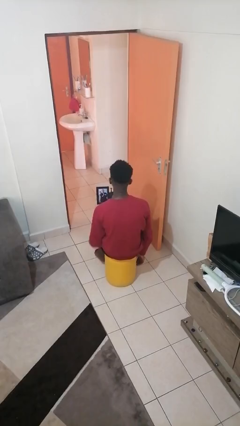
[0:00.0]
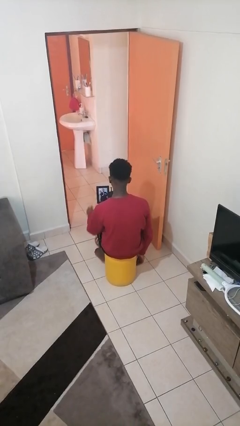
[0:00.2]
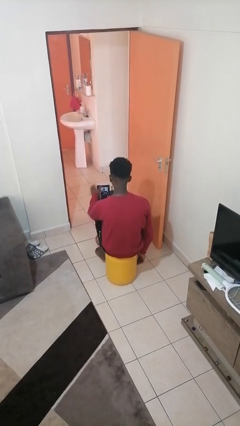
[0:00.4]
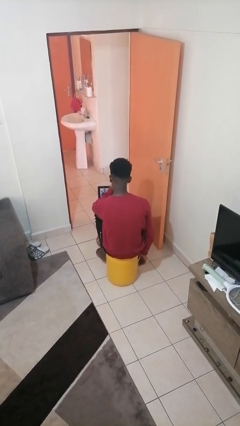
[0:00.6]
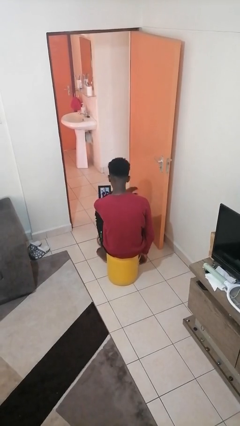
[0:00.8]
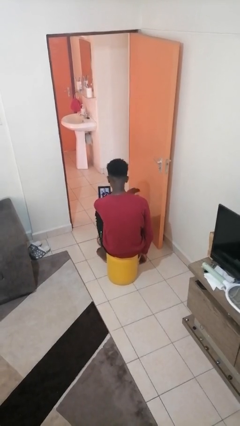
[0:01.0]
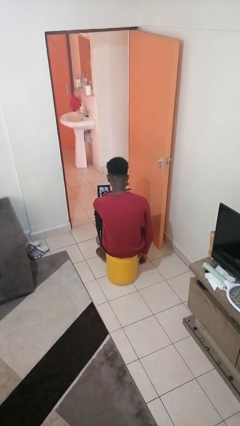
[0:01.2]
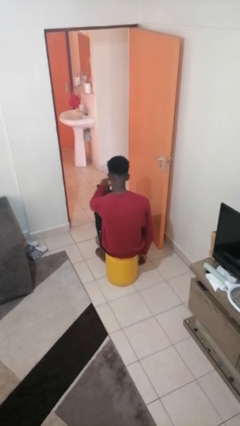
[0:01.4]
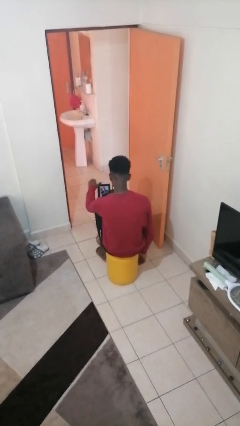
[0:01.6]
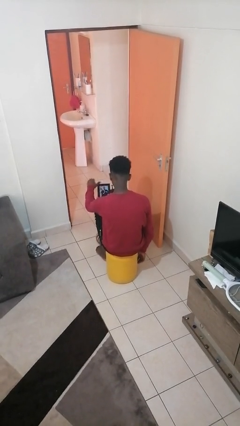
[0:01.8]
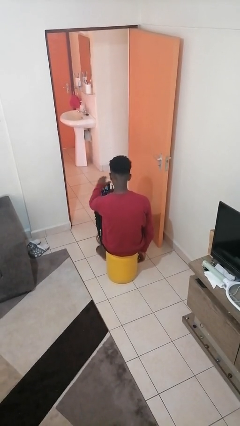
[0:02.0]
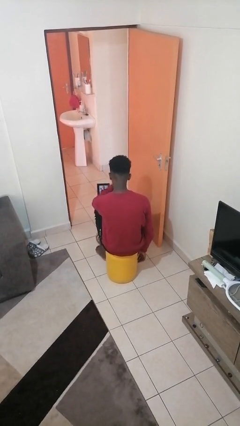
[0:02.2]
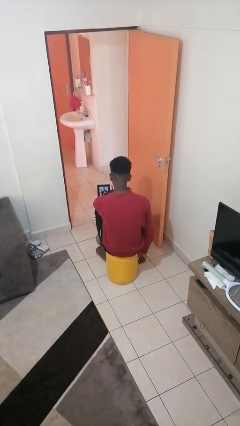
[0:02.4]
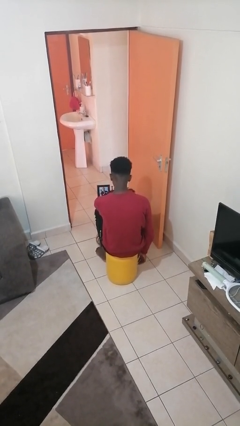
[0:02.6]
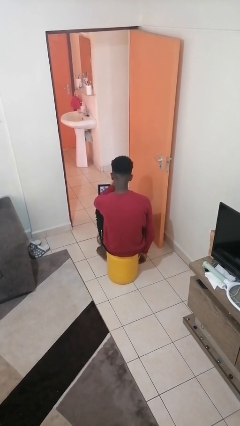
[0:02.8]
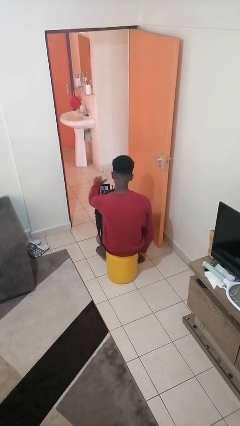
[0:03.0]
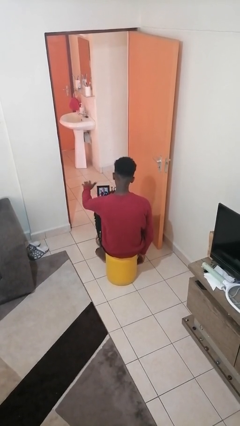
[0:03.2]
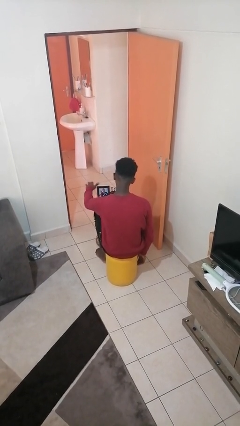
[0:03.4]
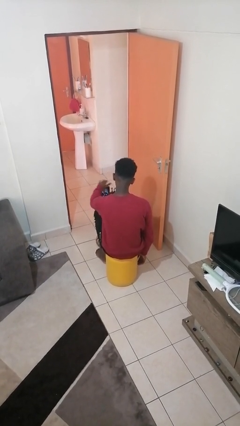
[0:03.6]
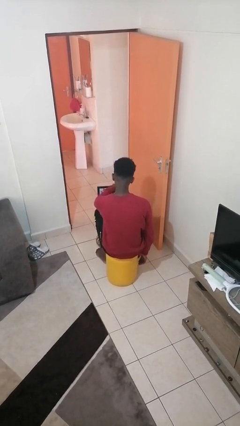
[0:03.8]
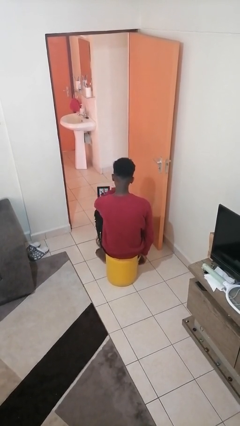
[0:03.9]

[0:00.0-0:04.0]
person waves hand over object

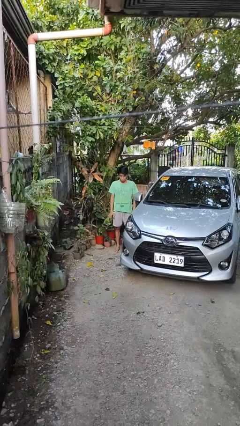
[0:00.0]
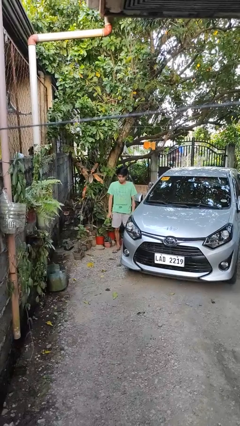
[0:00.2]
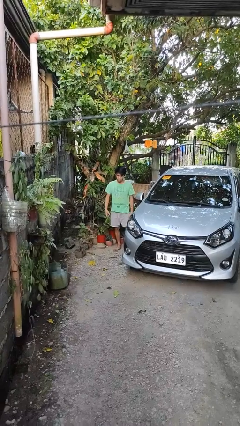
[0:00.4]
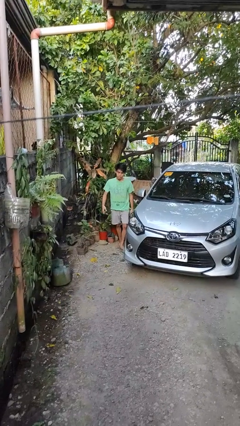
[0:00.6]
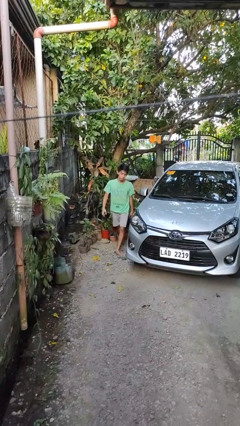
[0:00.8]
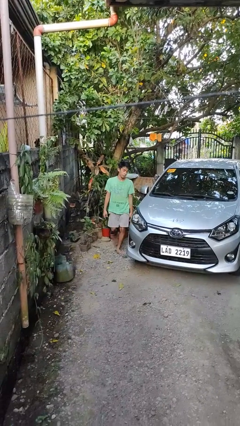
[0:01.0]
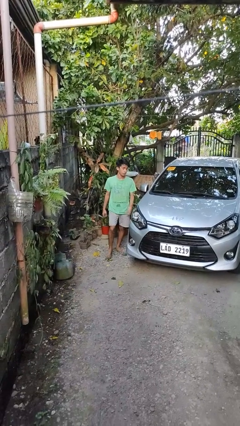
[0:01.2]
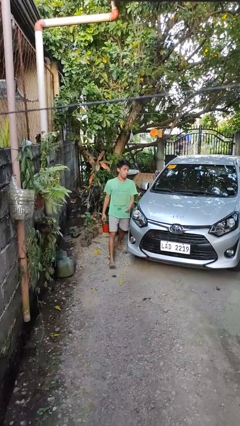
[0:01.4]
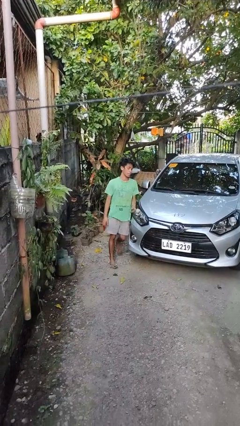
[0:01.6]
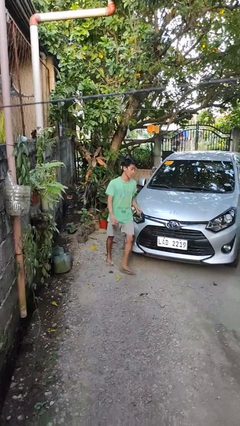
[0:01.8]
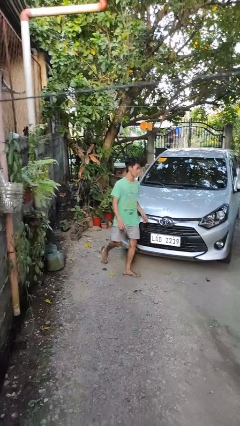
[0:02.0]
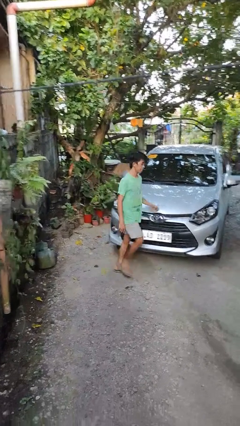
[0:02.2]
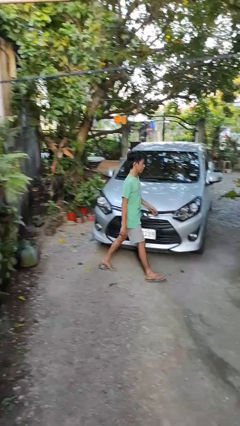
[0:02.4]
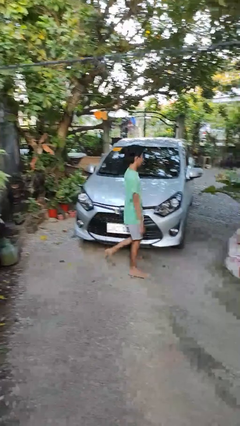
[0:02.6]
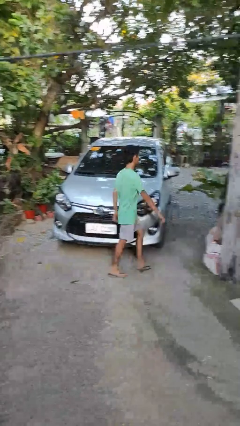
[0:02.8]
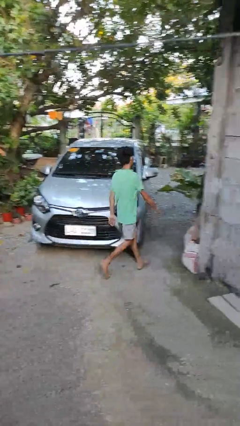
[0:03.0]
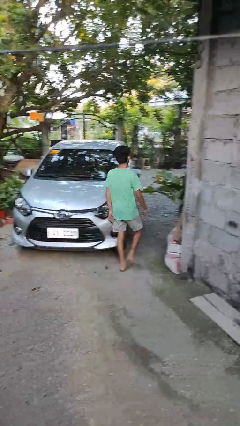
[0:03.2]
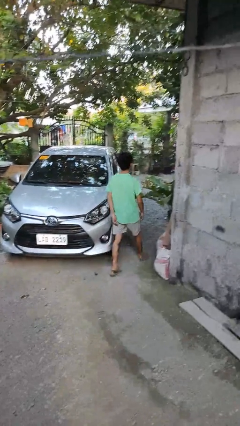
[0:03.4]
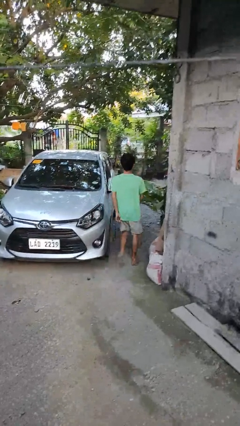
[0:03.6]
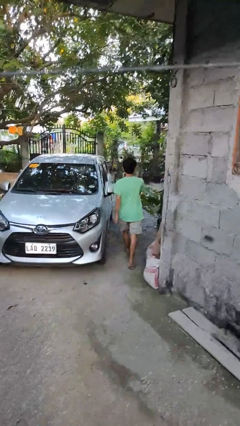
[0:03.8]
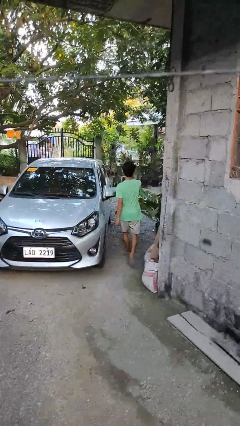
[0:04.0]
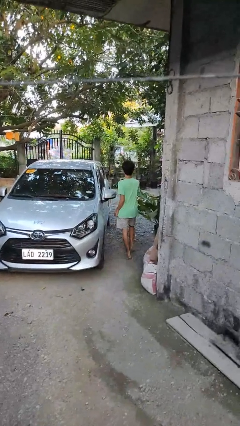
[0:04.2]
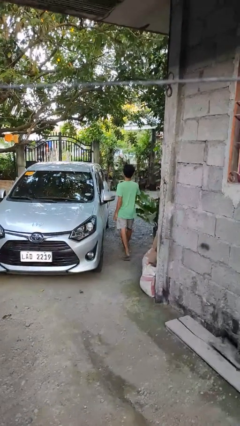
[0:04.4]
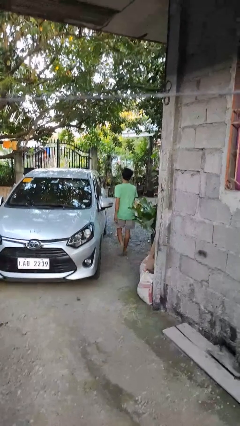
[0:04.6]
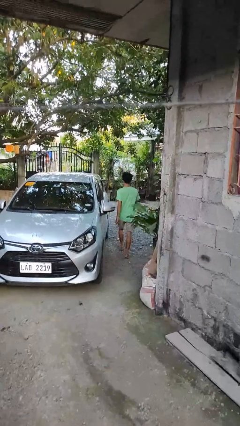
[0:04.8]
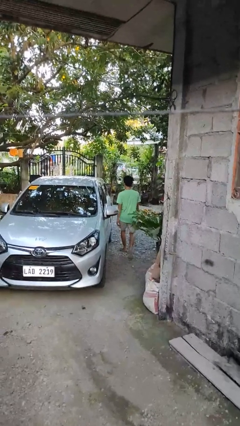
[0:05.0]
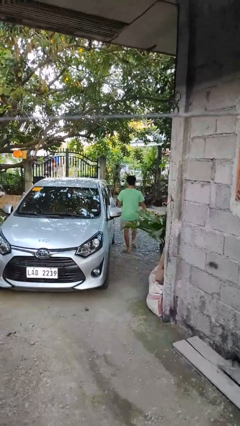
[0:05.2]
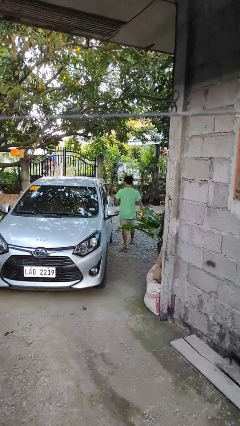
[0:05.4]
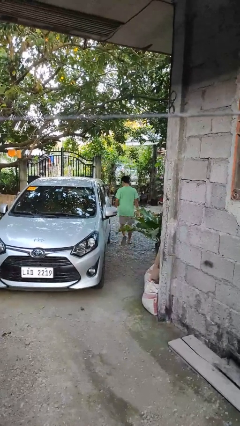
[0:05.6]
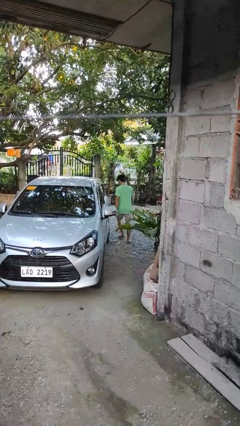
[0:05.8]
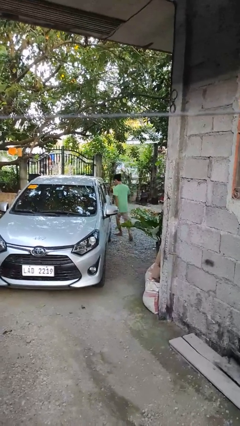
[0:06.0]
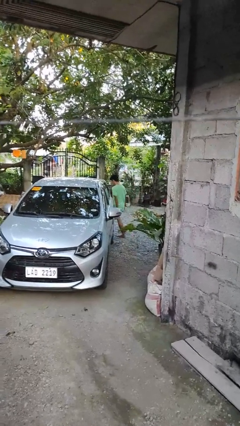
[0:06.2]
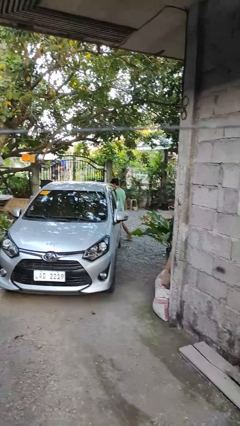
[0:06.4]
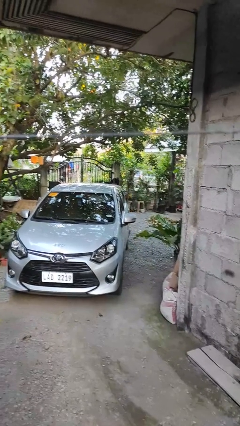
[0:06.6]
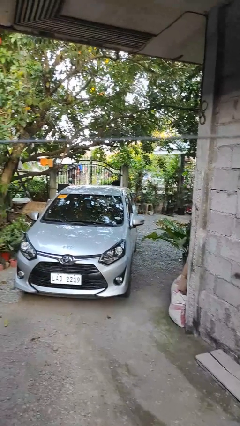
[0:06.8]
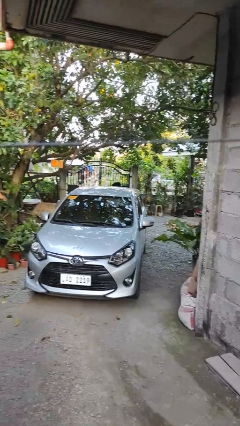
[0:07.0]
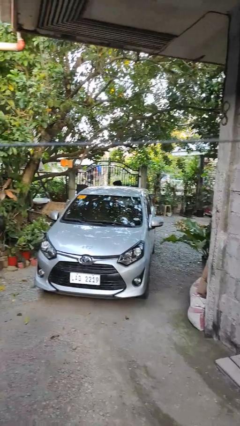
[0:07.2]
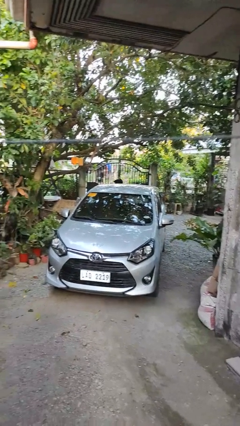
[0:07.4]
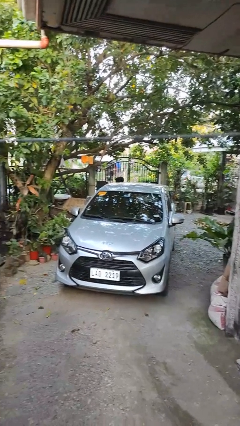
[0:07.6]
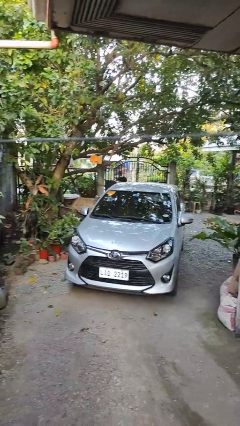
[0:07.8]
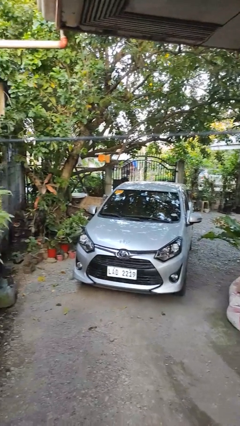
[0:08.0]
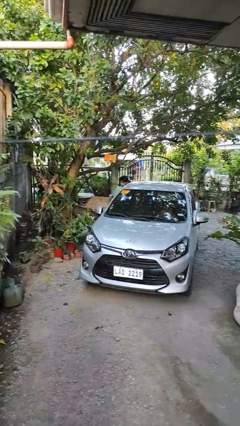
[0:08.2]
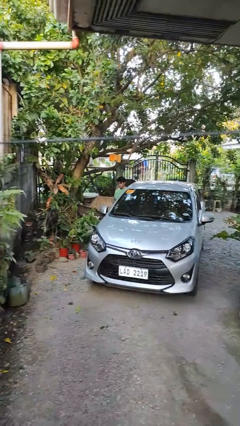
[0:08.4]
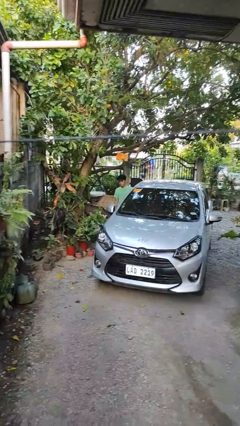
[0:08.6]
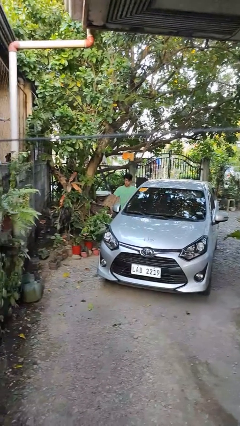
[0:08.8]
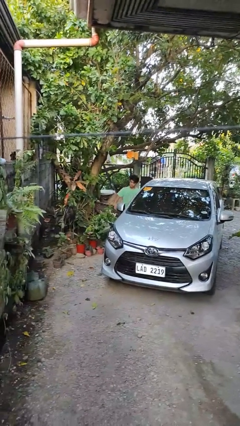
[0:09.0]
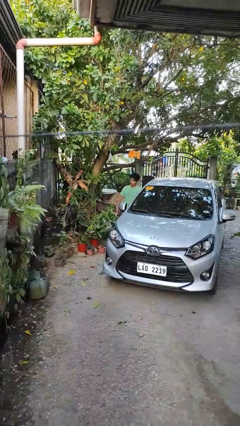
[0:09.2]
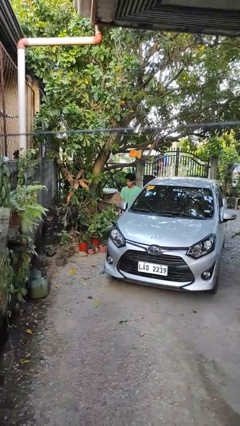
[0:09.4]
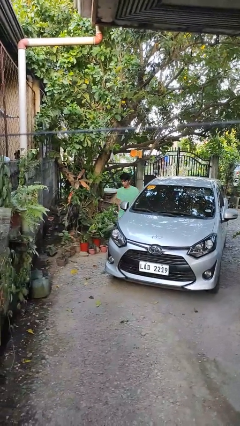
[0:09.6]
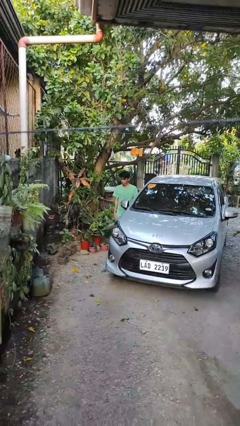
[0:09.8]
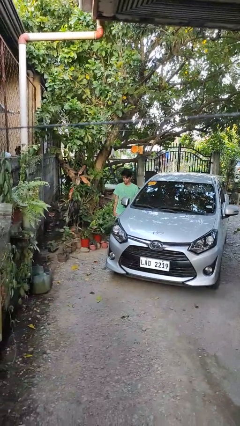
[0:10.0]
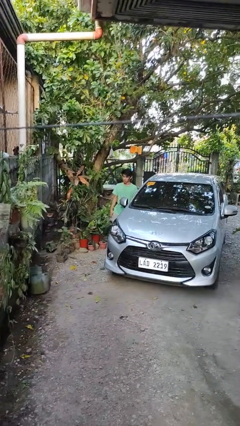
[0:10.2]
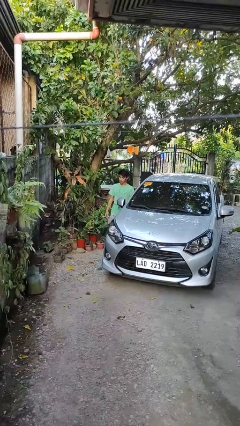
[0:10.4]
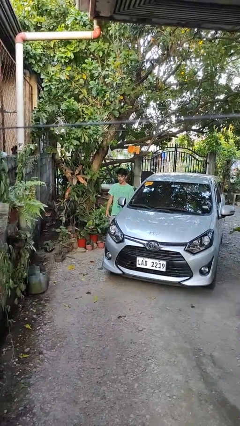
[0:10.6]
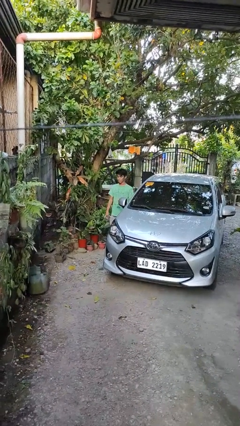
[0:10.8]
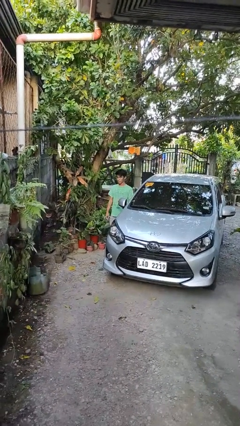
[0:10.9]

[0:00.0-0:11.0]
person walks around car

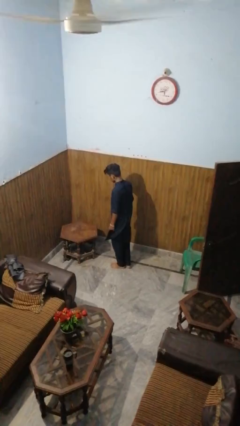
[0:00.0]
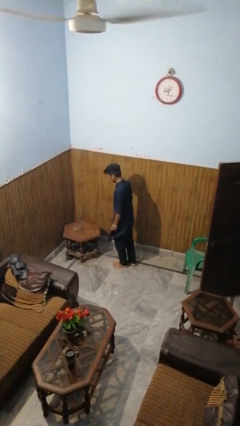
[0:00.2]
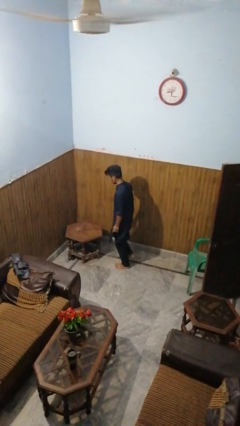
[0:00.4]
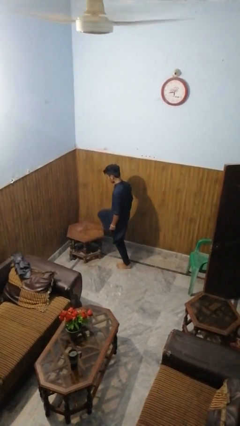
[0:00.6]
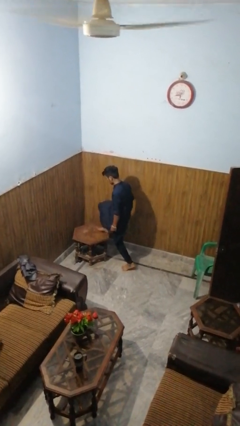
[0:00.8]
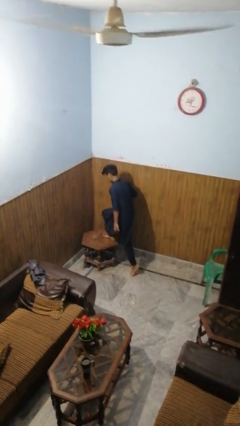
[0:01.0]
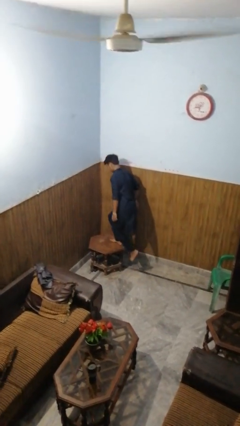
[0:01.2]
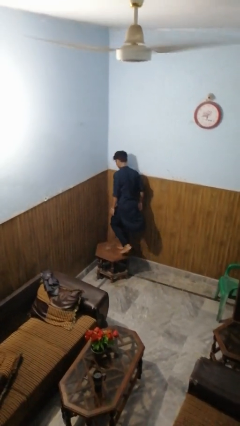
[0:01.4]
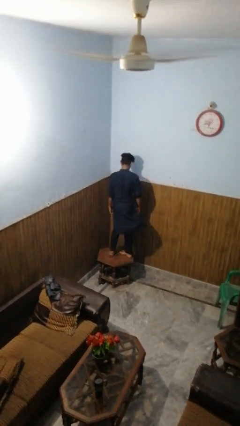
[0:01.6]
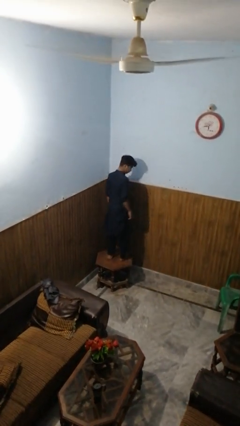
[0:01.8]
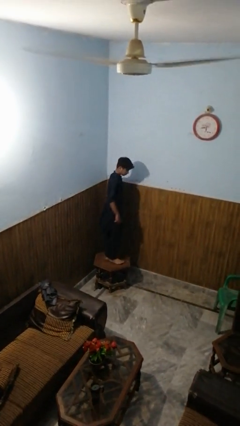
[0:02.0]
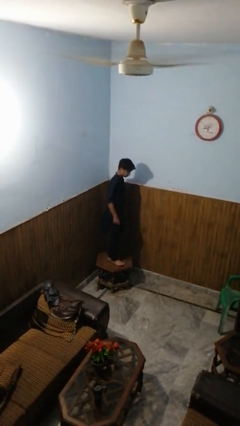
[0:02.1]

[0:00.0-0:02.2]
person climbs on table

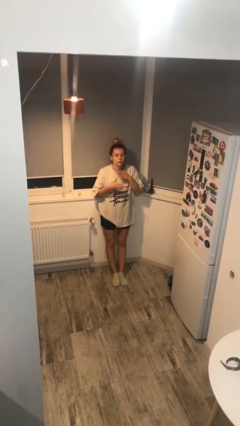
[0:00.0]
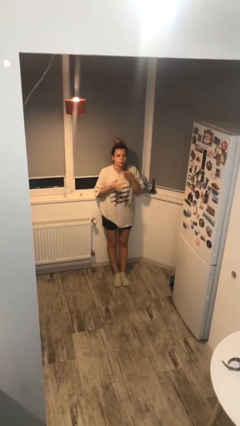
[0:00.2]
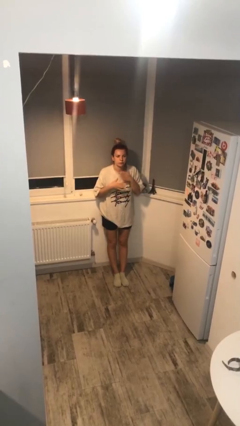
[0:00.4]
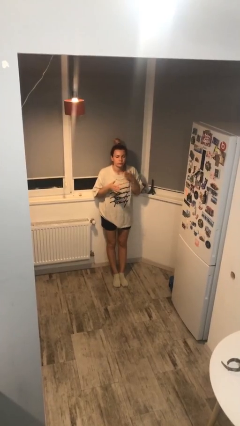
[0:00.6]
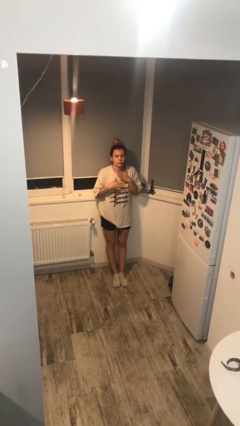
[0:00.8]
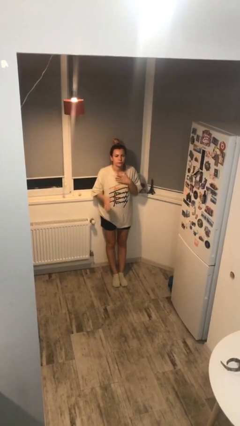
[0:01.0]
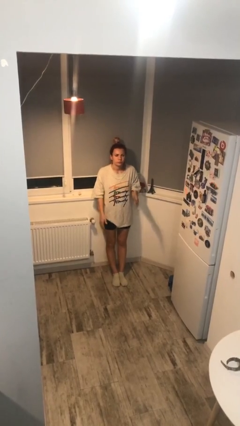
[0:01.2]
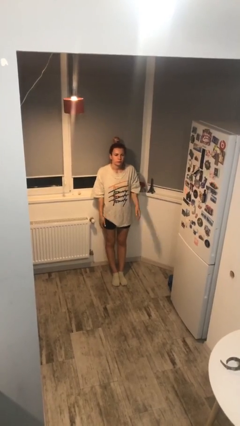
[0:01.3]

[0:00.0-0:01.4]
person drums on chest
